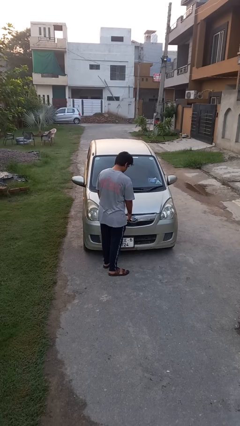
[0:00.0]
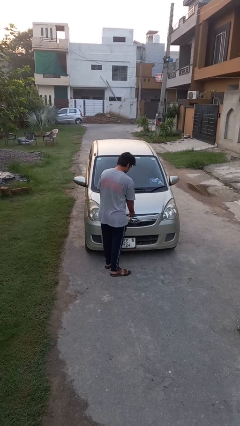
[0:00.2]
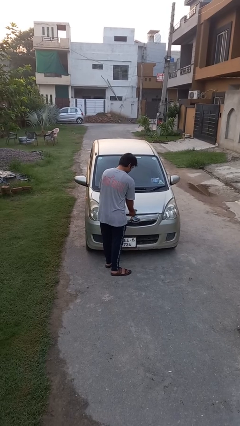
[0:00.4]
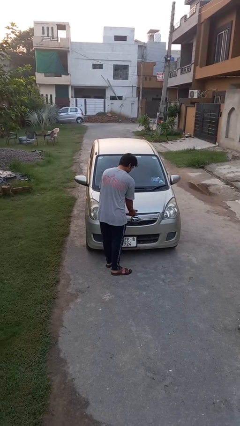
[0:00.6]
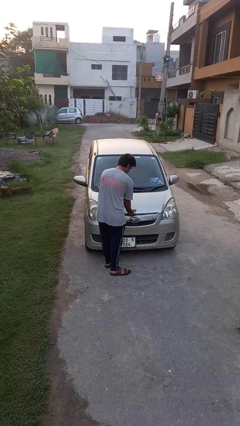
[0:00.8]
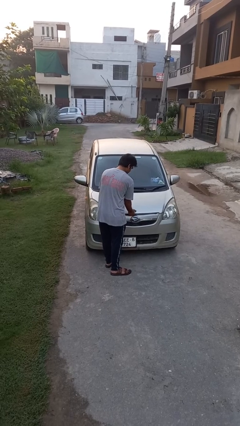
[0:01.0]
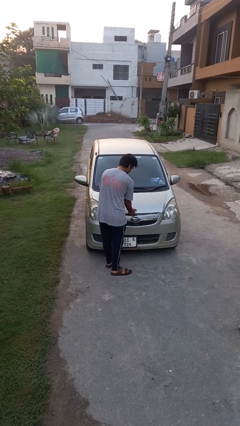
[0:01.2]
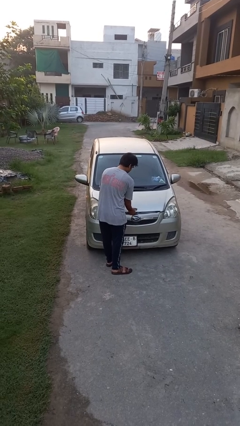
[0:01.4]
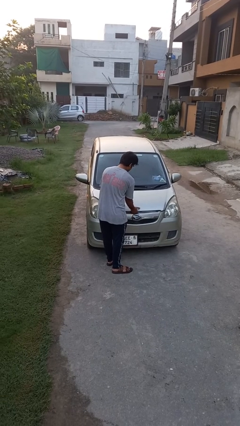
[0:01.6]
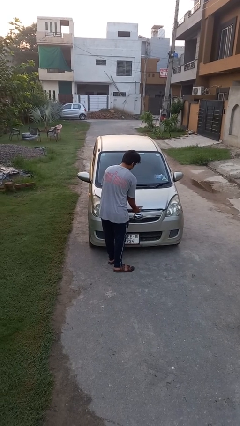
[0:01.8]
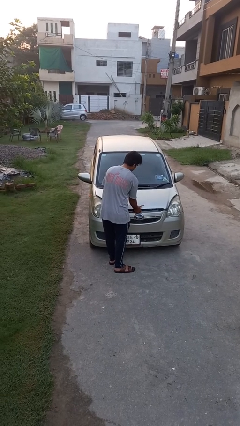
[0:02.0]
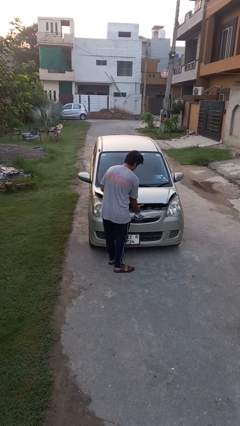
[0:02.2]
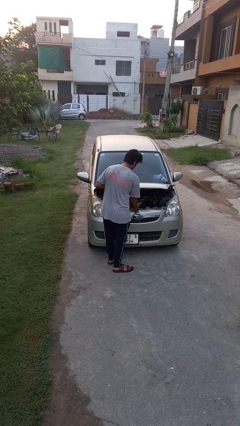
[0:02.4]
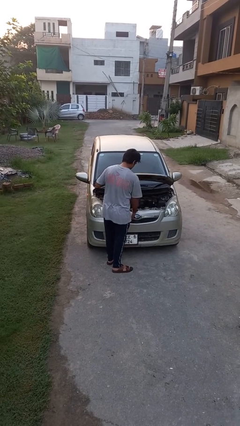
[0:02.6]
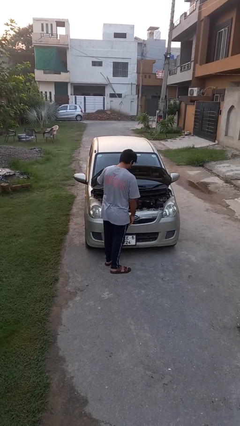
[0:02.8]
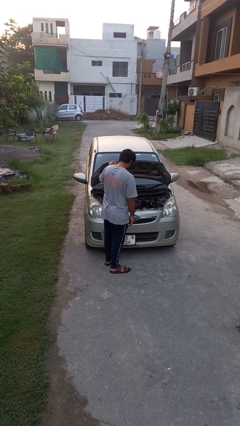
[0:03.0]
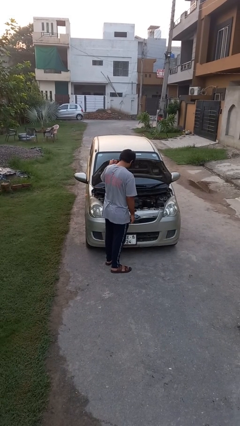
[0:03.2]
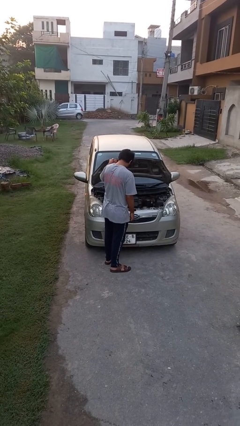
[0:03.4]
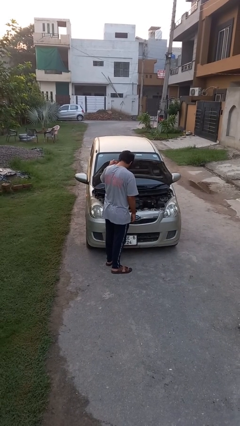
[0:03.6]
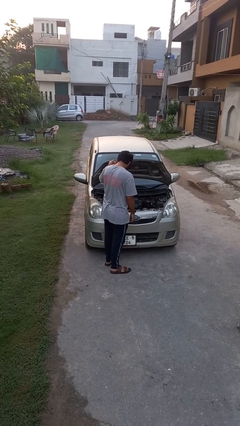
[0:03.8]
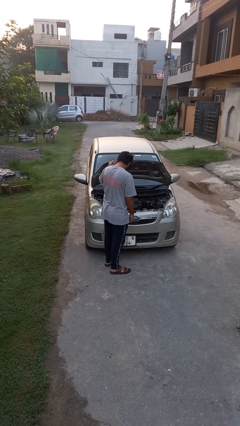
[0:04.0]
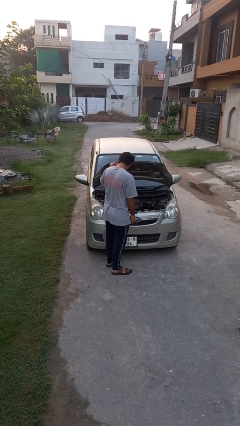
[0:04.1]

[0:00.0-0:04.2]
person opens car hood

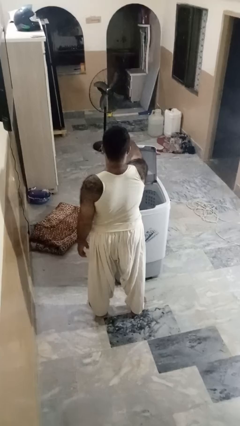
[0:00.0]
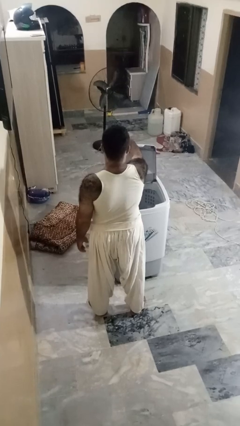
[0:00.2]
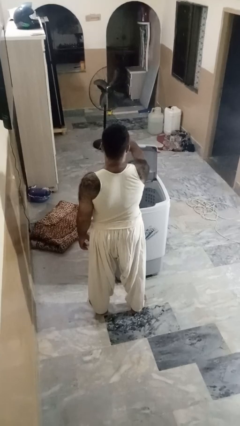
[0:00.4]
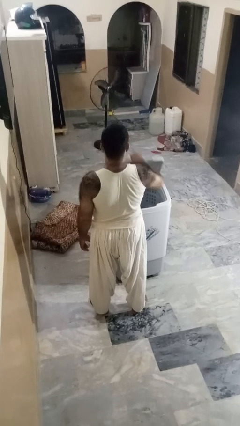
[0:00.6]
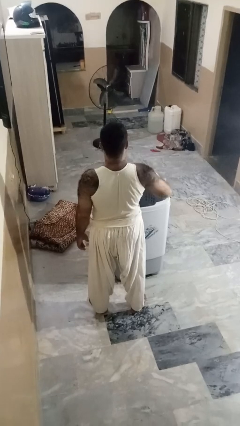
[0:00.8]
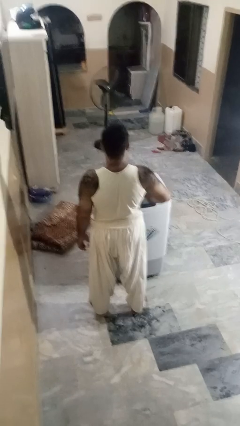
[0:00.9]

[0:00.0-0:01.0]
person closes clothes washer

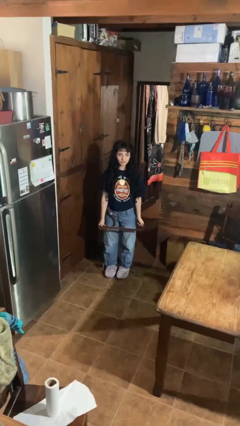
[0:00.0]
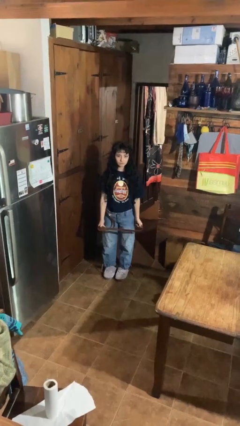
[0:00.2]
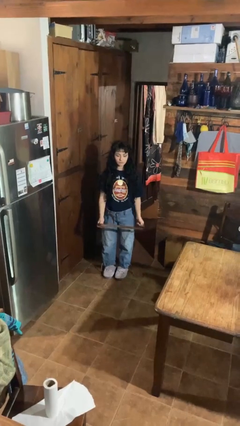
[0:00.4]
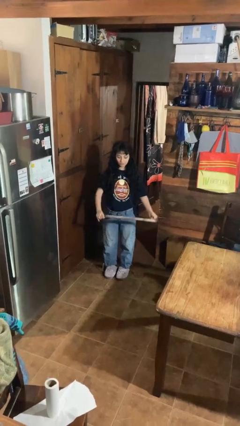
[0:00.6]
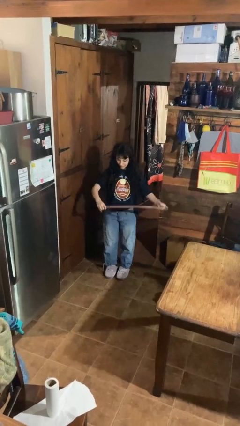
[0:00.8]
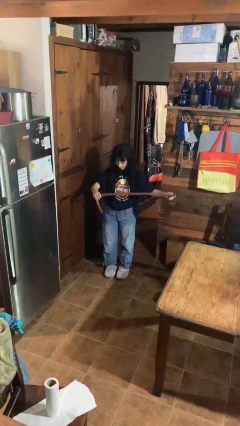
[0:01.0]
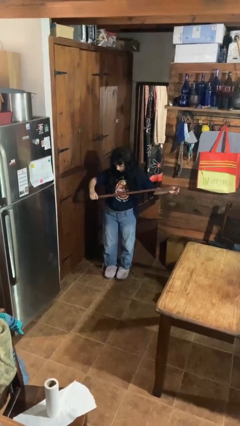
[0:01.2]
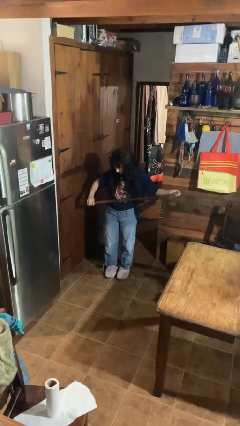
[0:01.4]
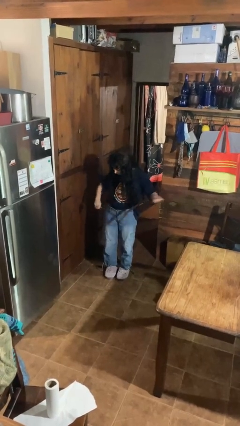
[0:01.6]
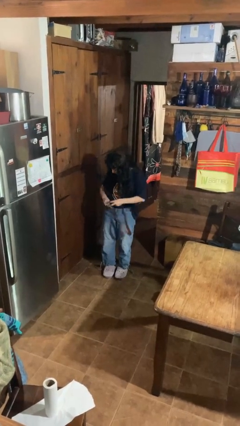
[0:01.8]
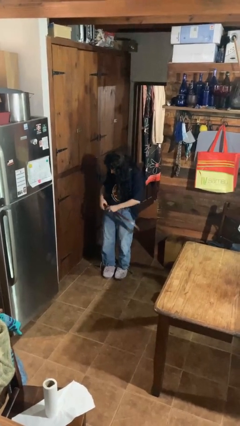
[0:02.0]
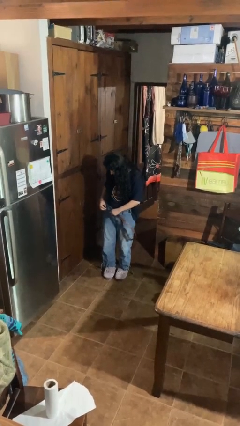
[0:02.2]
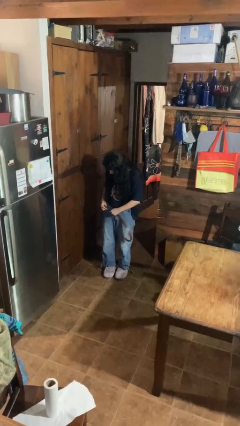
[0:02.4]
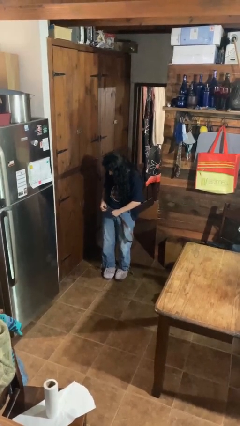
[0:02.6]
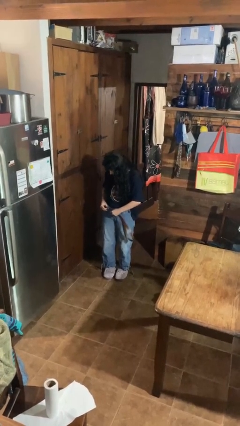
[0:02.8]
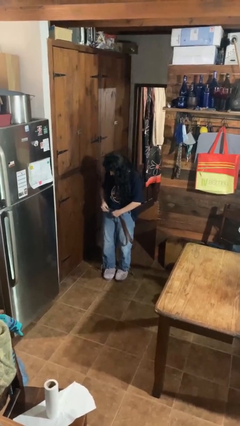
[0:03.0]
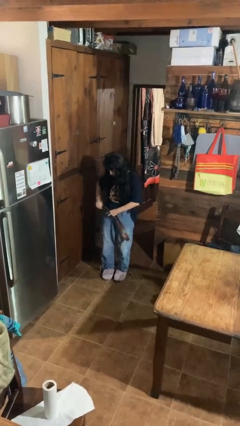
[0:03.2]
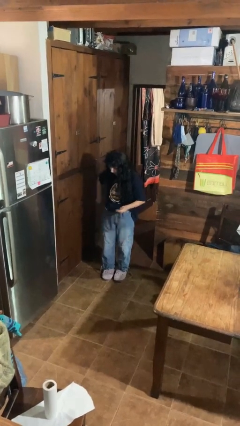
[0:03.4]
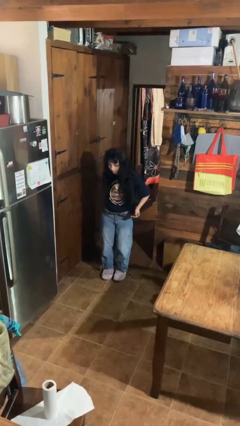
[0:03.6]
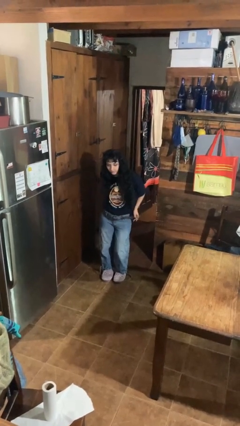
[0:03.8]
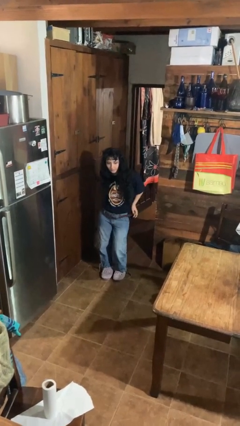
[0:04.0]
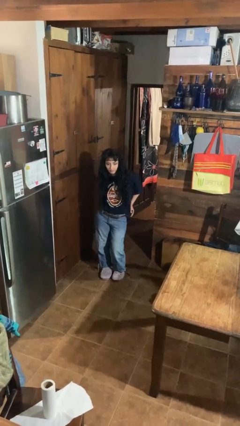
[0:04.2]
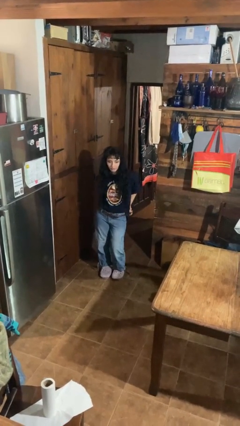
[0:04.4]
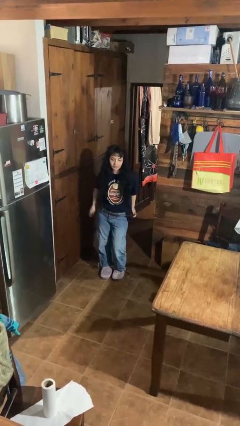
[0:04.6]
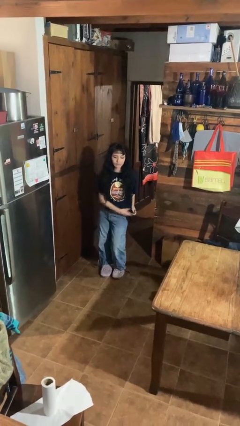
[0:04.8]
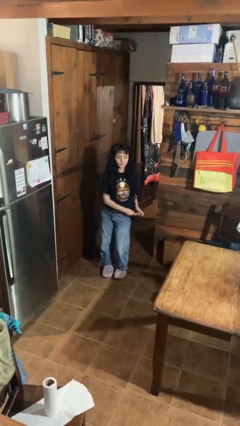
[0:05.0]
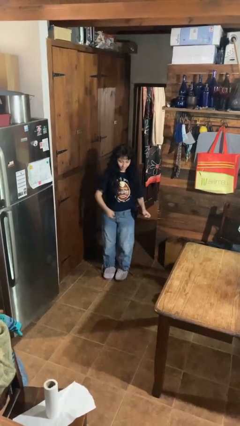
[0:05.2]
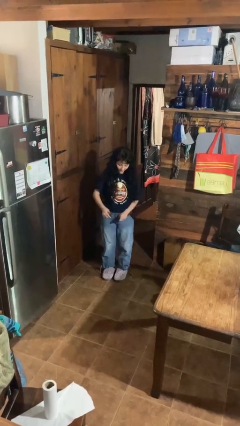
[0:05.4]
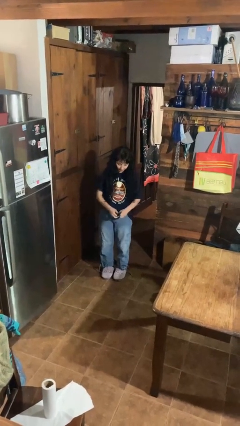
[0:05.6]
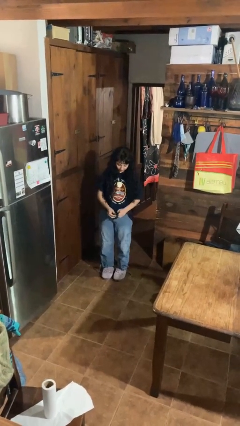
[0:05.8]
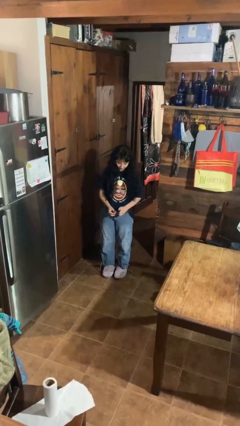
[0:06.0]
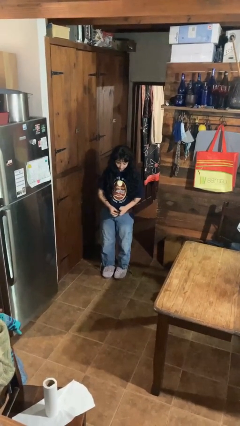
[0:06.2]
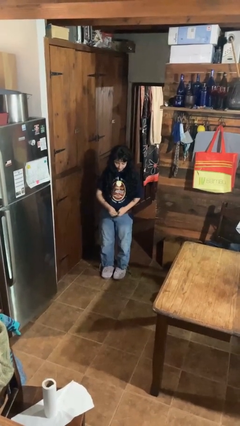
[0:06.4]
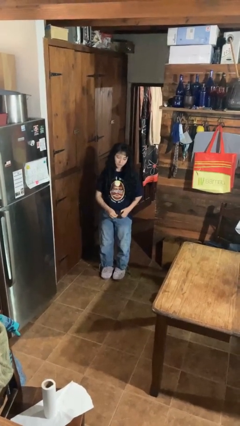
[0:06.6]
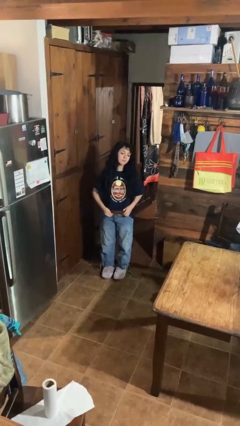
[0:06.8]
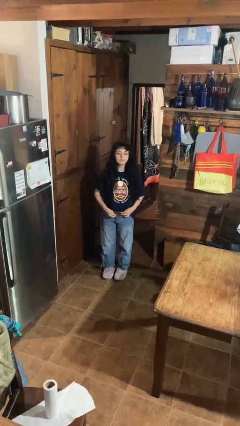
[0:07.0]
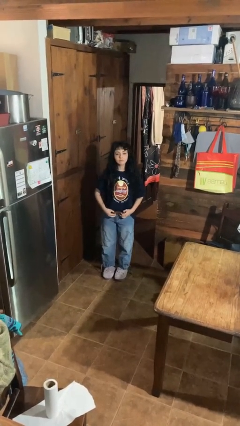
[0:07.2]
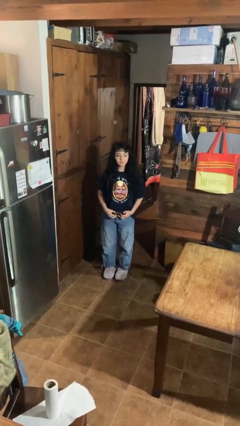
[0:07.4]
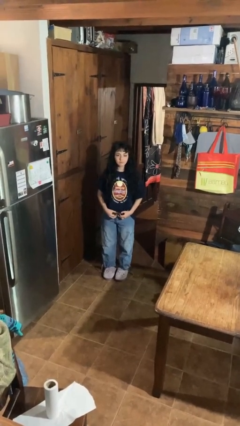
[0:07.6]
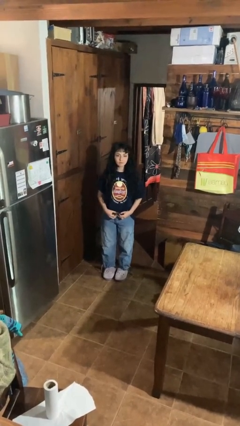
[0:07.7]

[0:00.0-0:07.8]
person puts on belt

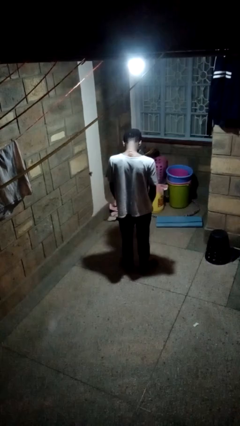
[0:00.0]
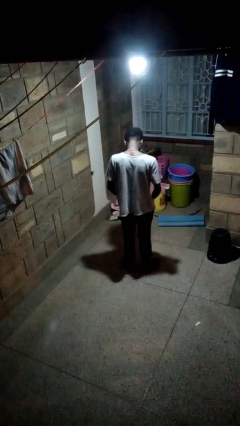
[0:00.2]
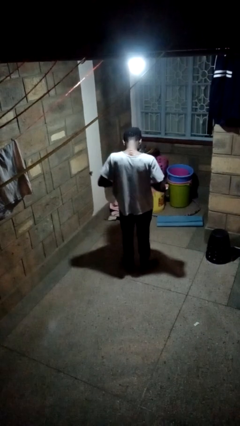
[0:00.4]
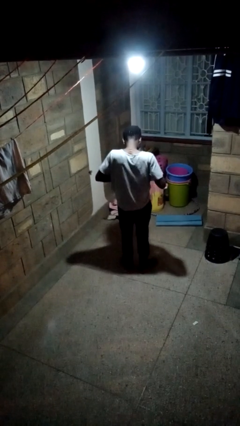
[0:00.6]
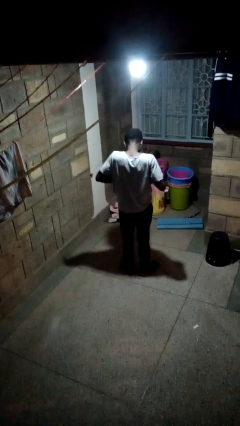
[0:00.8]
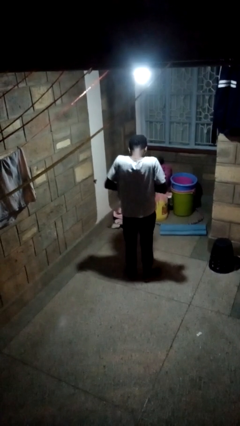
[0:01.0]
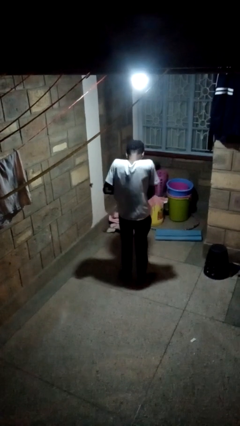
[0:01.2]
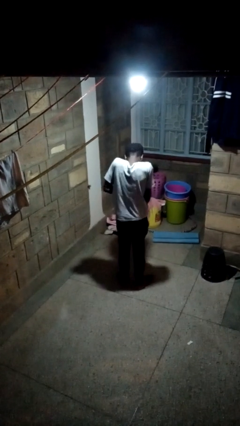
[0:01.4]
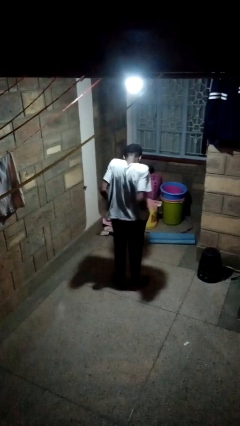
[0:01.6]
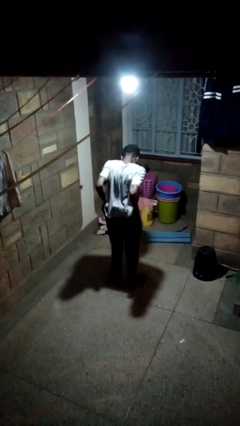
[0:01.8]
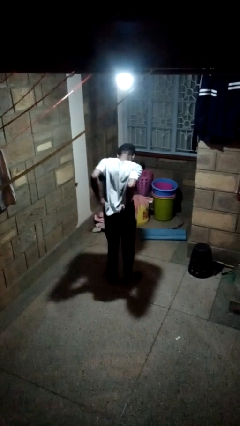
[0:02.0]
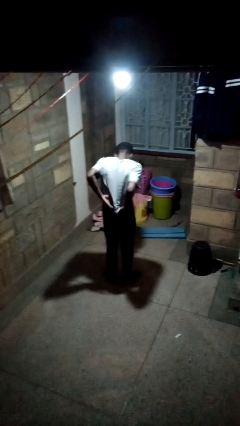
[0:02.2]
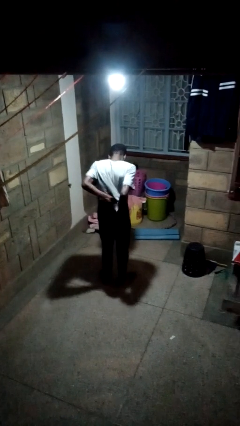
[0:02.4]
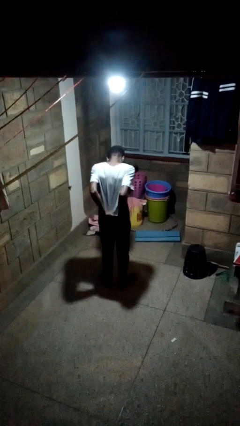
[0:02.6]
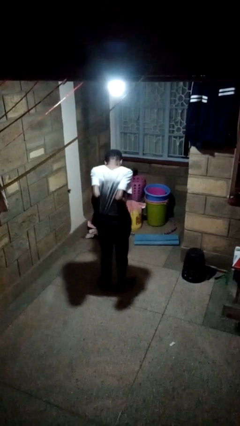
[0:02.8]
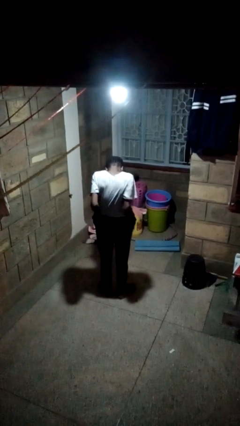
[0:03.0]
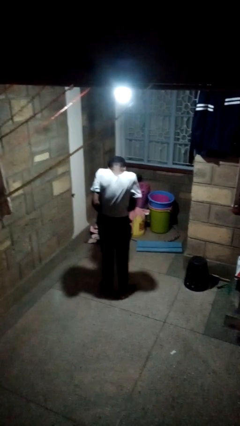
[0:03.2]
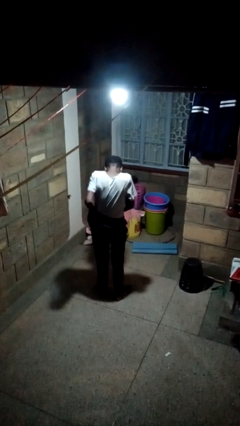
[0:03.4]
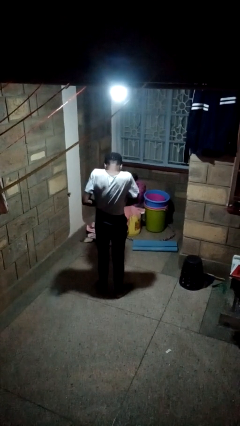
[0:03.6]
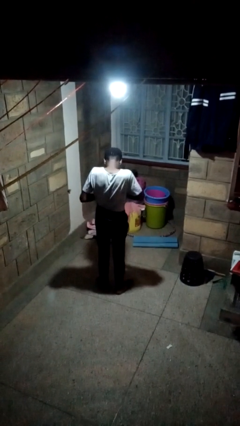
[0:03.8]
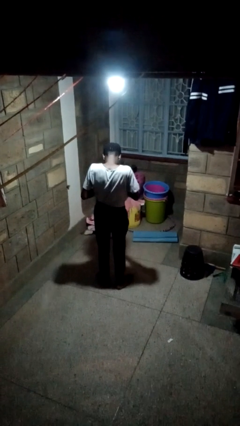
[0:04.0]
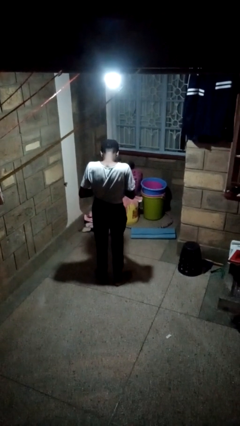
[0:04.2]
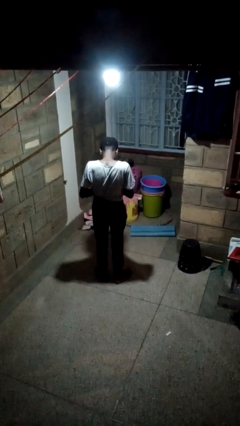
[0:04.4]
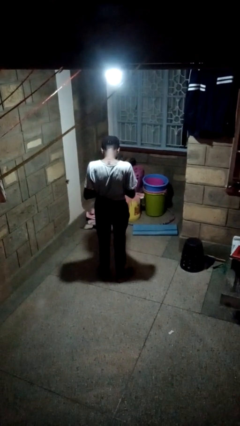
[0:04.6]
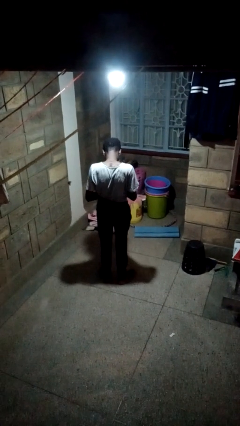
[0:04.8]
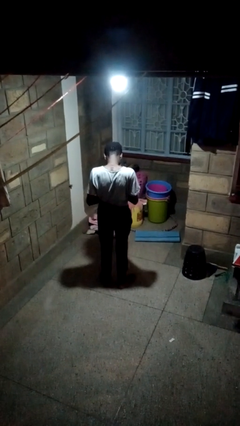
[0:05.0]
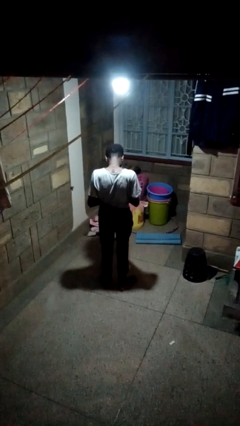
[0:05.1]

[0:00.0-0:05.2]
person tucks in shirt
